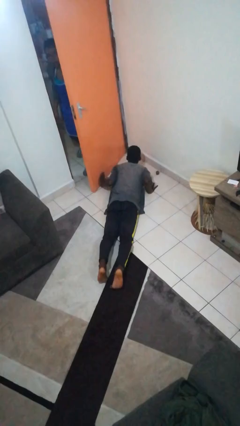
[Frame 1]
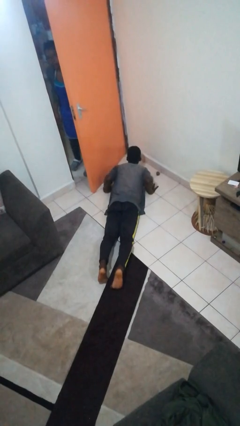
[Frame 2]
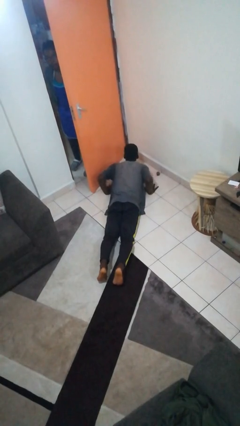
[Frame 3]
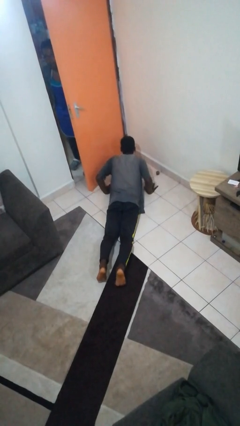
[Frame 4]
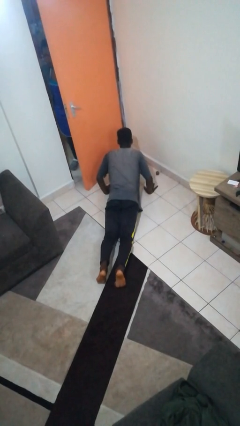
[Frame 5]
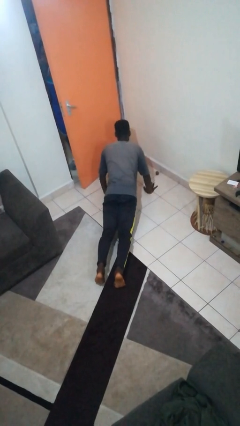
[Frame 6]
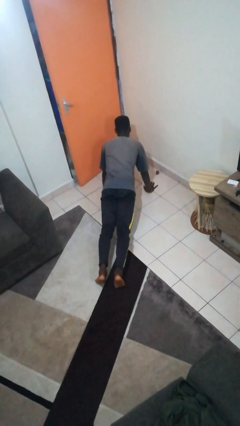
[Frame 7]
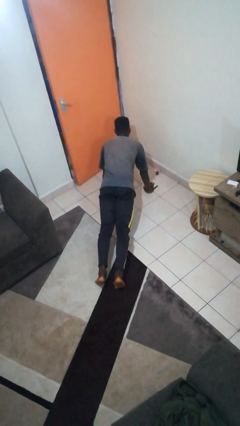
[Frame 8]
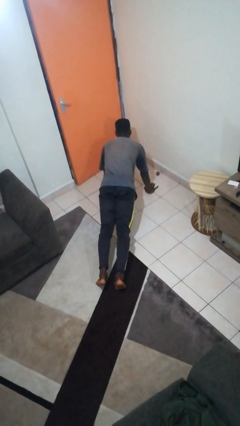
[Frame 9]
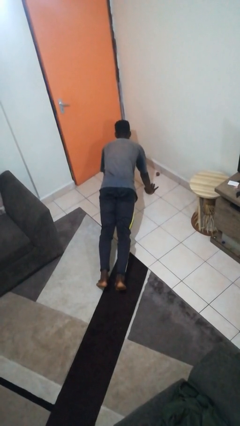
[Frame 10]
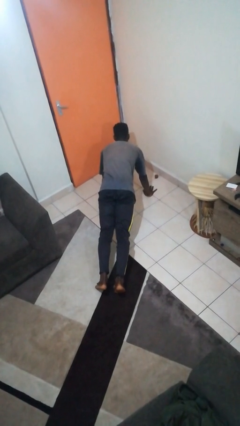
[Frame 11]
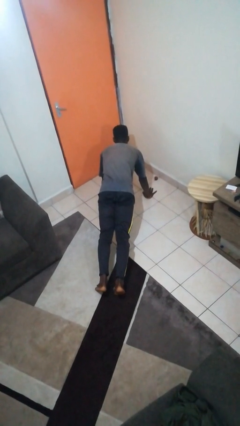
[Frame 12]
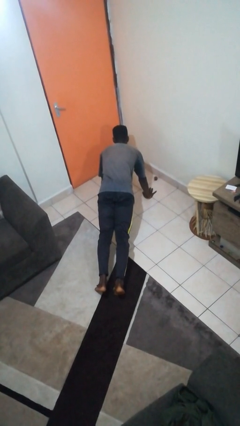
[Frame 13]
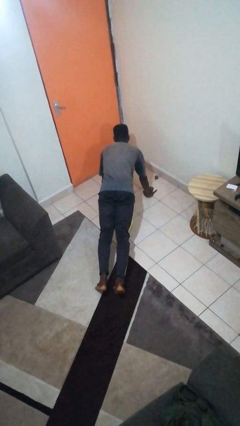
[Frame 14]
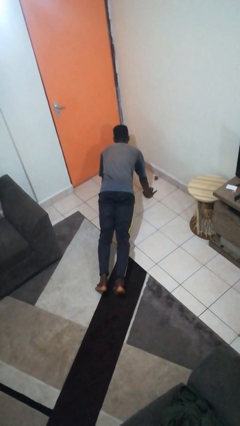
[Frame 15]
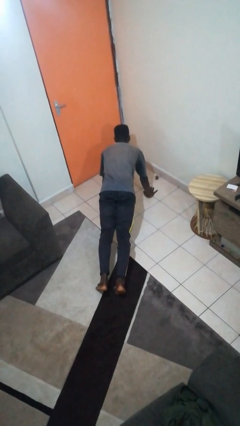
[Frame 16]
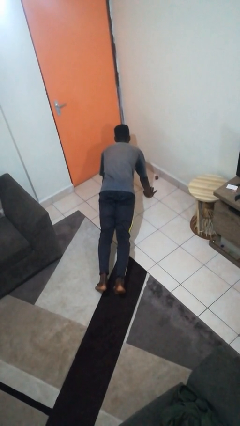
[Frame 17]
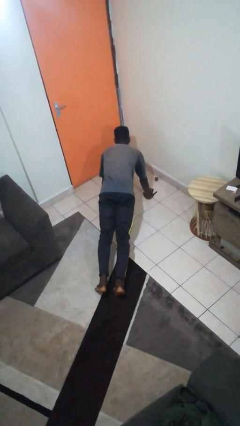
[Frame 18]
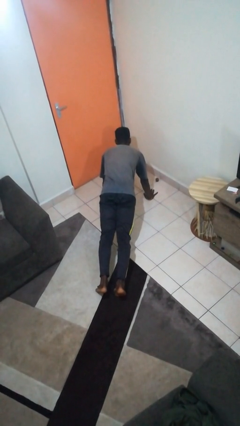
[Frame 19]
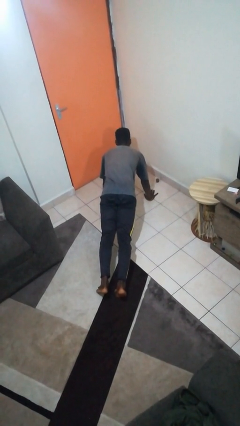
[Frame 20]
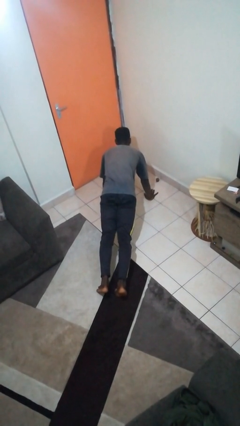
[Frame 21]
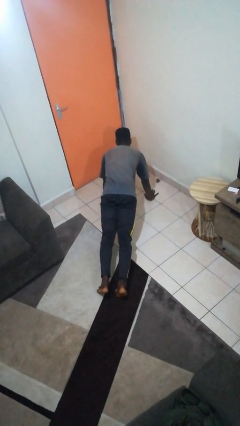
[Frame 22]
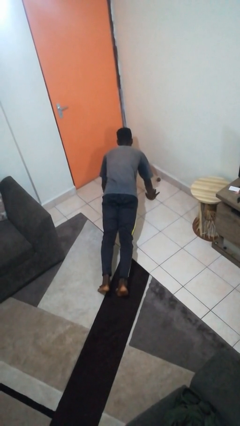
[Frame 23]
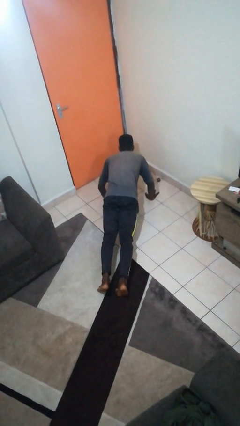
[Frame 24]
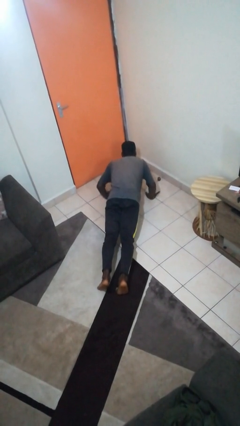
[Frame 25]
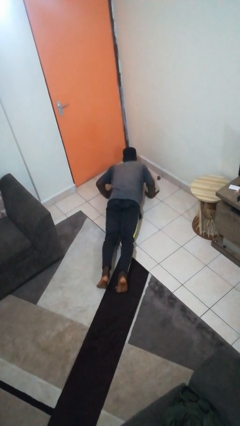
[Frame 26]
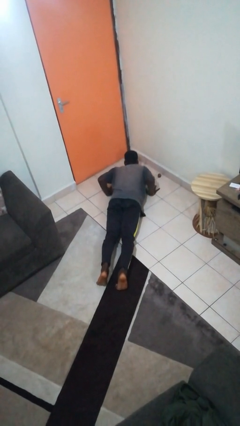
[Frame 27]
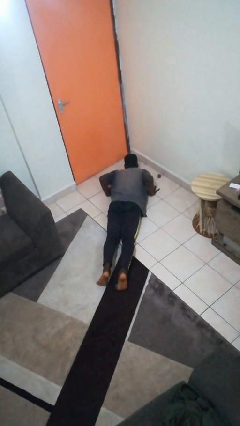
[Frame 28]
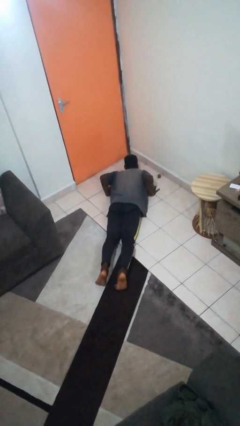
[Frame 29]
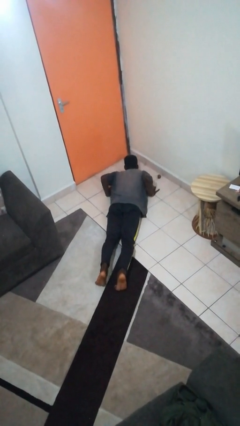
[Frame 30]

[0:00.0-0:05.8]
person exercises with pushup

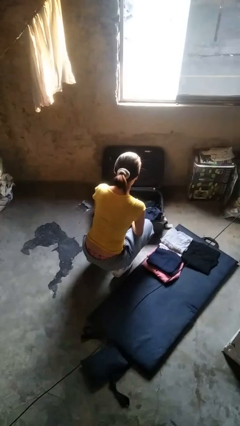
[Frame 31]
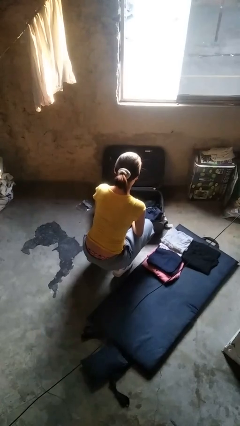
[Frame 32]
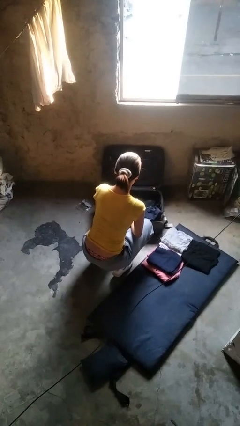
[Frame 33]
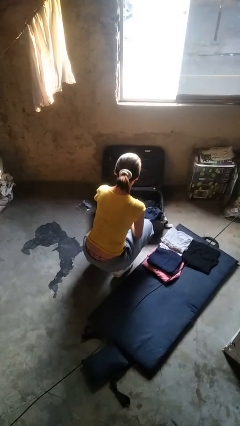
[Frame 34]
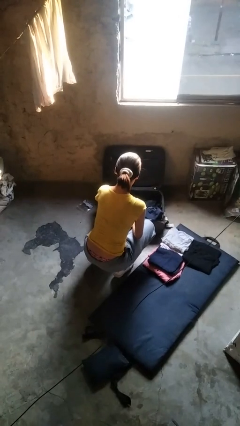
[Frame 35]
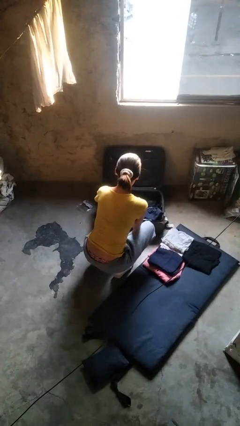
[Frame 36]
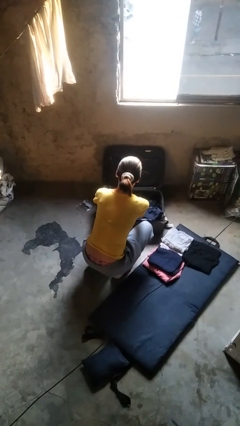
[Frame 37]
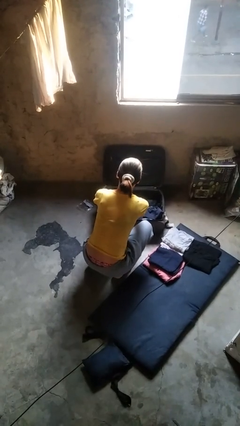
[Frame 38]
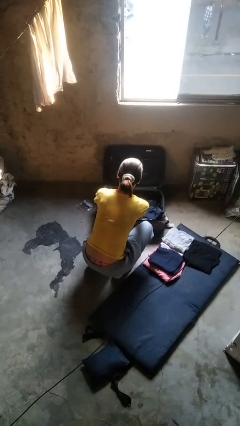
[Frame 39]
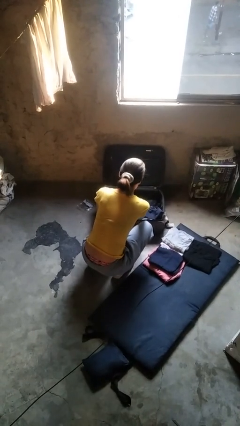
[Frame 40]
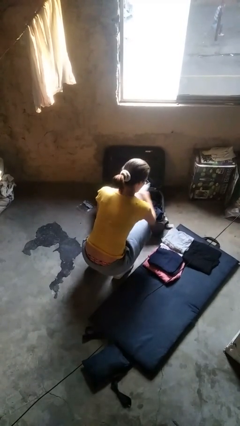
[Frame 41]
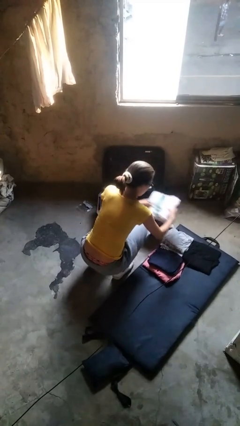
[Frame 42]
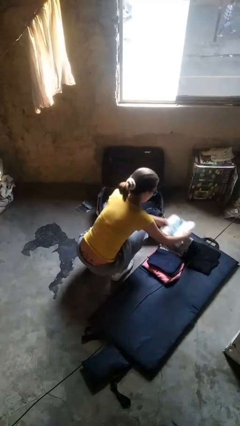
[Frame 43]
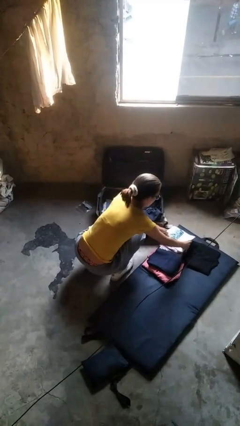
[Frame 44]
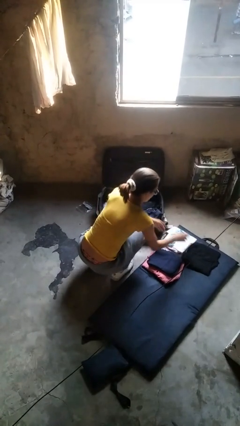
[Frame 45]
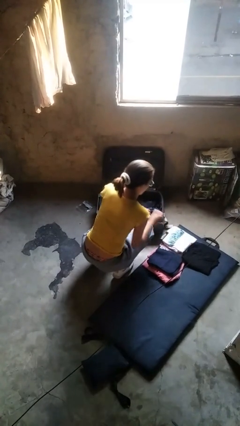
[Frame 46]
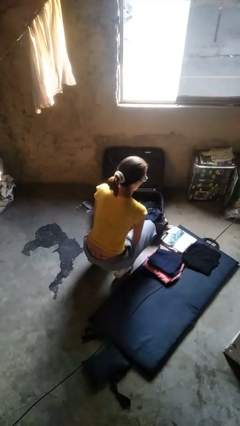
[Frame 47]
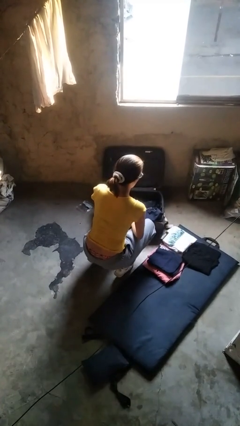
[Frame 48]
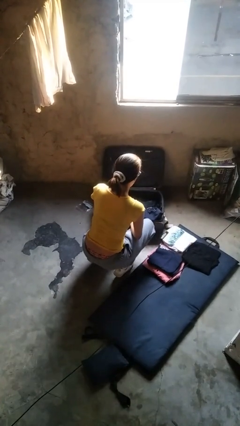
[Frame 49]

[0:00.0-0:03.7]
person unloads clothes from suitcase

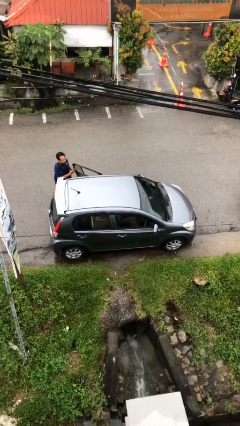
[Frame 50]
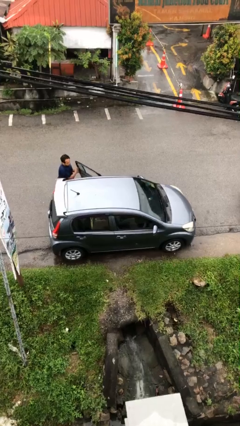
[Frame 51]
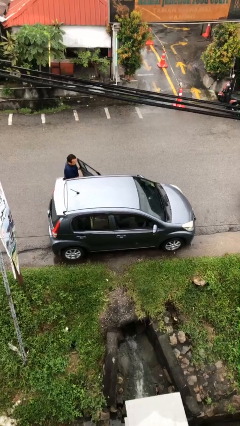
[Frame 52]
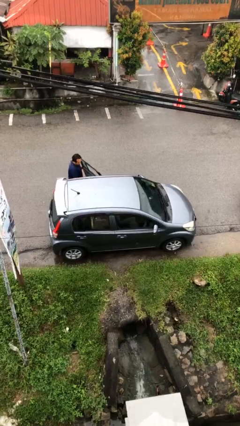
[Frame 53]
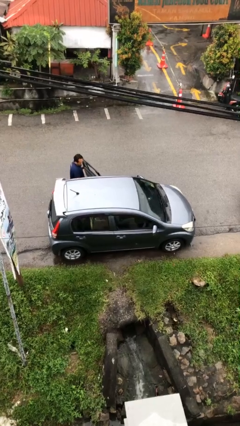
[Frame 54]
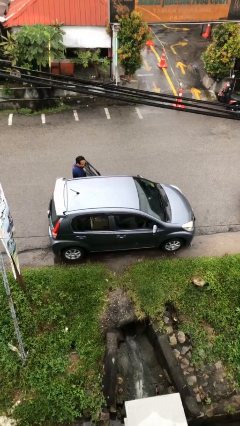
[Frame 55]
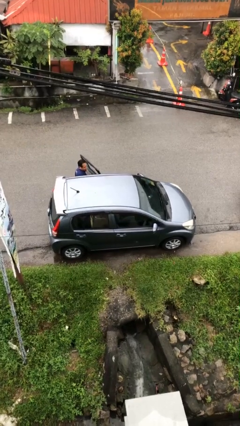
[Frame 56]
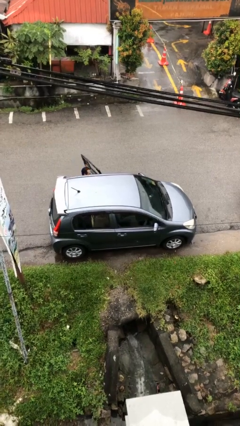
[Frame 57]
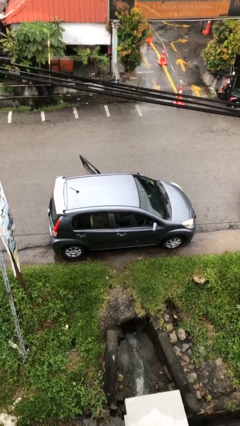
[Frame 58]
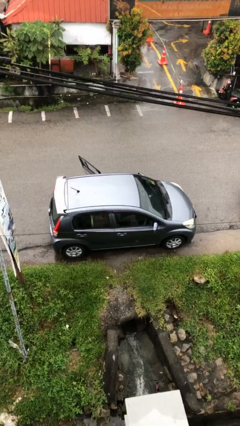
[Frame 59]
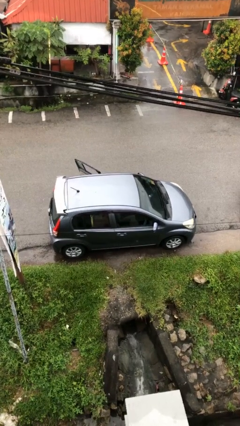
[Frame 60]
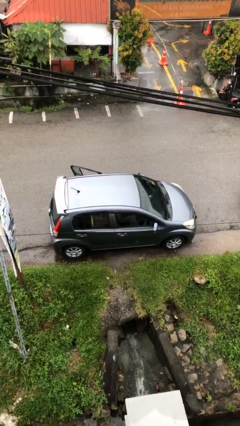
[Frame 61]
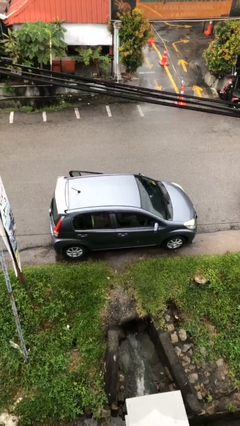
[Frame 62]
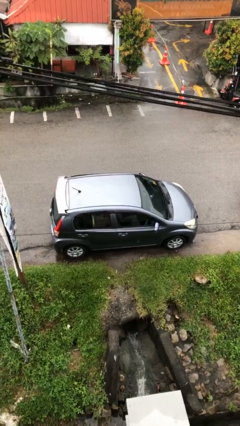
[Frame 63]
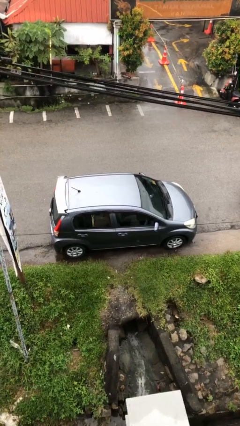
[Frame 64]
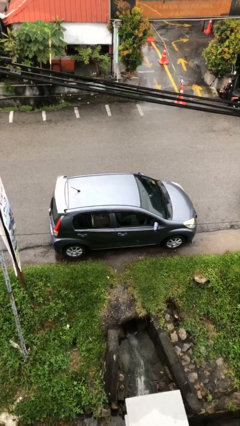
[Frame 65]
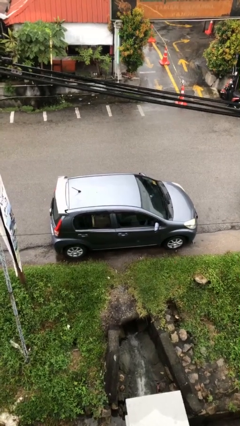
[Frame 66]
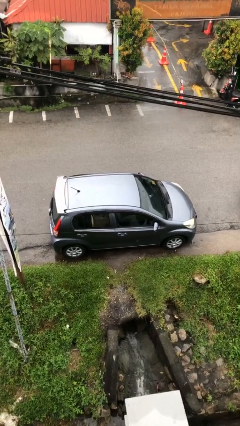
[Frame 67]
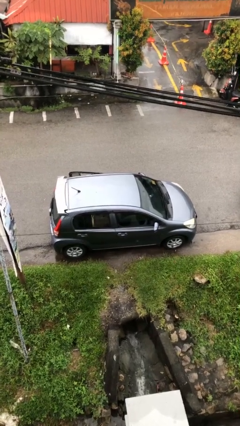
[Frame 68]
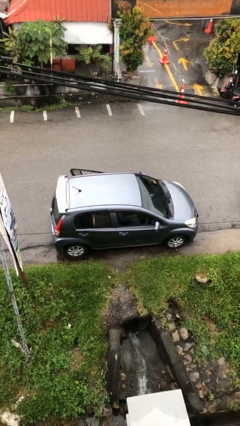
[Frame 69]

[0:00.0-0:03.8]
car picks up person

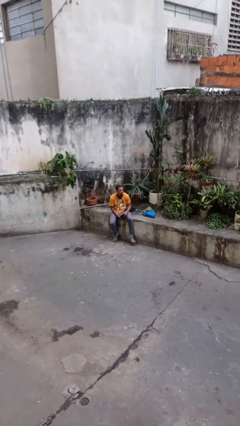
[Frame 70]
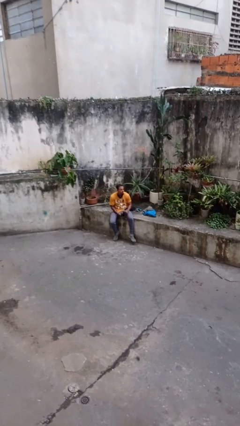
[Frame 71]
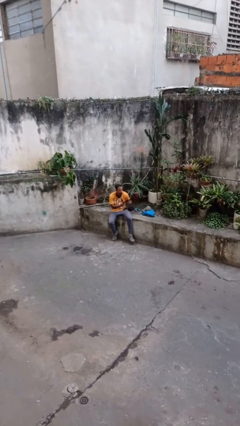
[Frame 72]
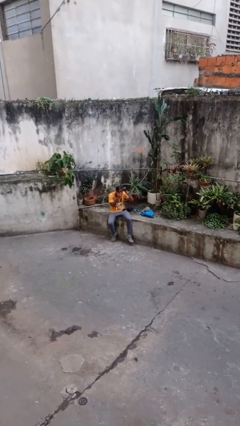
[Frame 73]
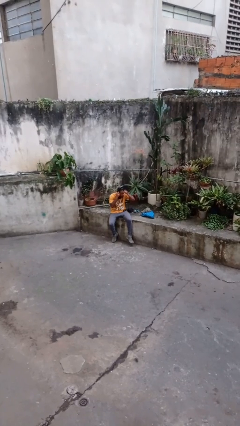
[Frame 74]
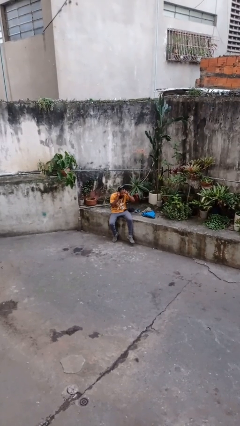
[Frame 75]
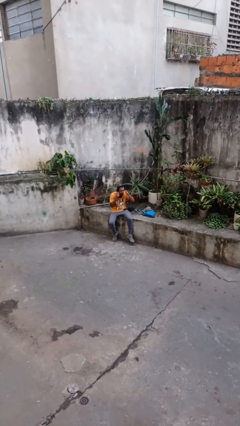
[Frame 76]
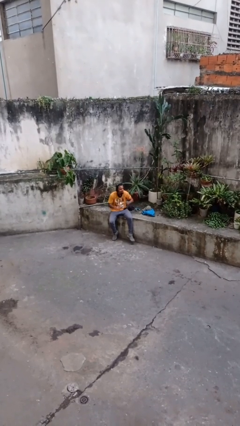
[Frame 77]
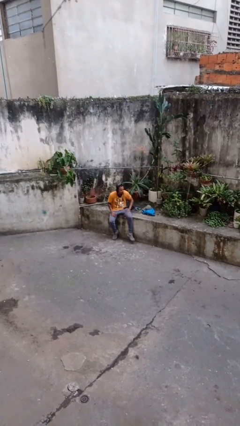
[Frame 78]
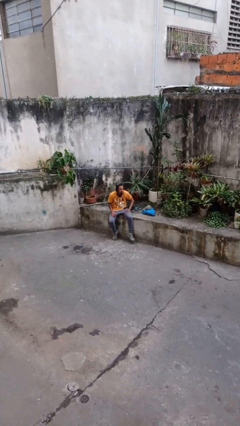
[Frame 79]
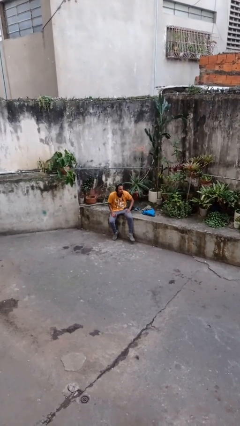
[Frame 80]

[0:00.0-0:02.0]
person puts on headphones

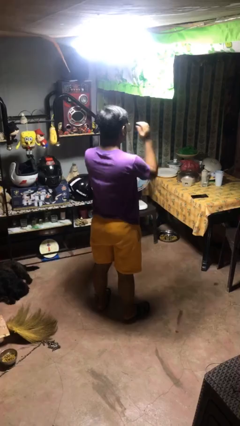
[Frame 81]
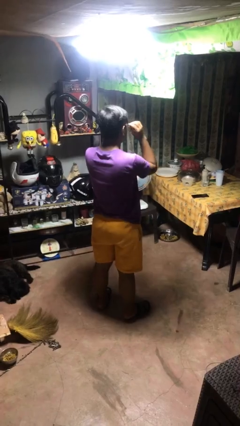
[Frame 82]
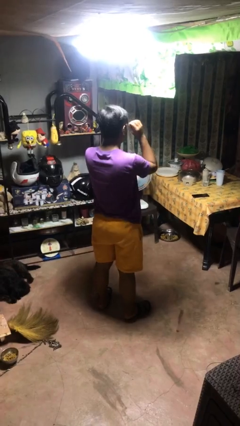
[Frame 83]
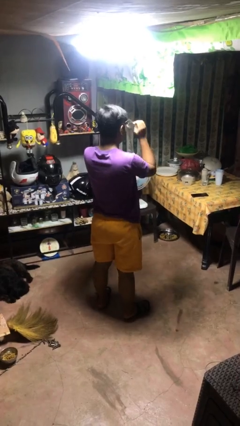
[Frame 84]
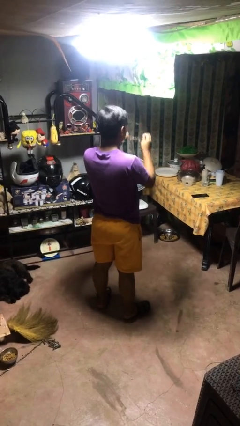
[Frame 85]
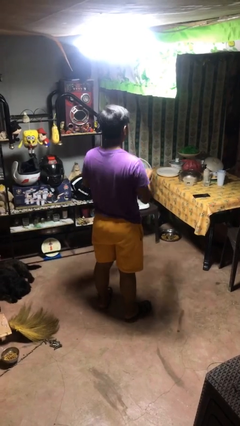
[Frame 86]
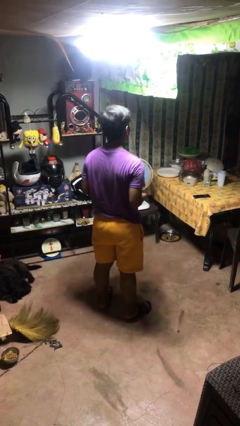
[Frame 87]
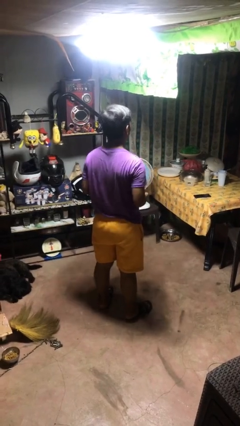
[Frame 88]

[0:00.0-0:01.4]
person takes off glasses

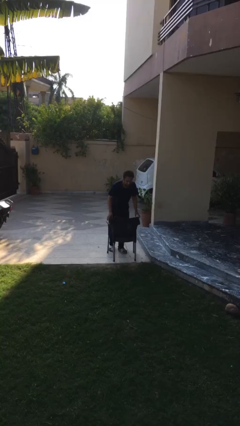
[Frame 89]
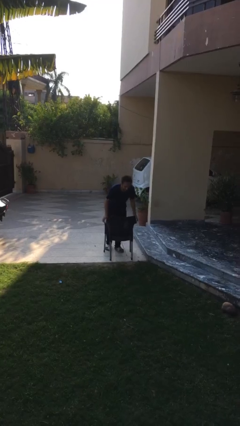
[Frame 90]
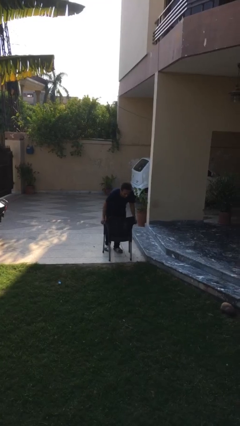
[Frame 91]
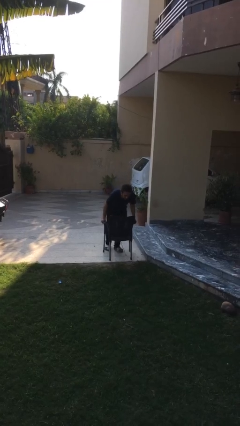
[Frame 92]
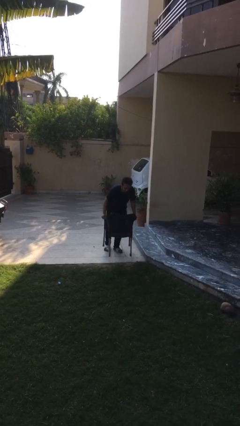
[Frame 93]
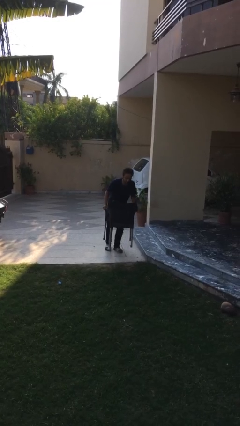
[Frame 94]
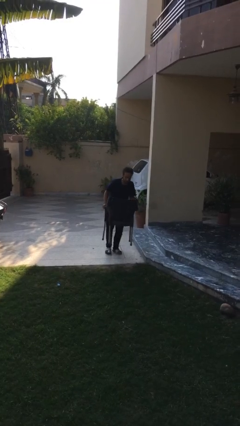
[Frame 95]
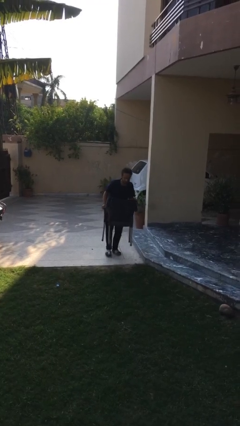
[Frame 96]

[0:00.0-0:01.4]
person picks up object from floor
